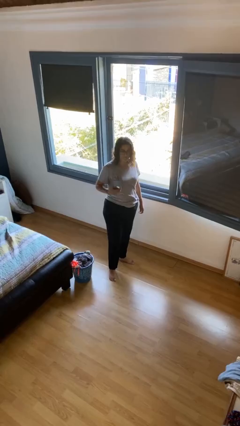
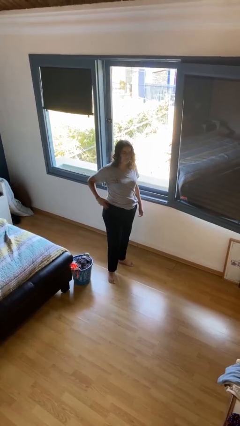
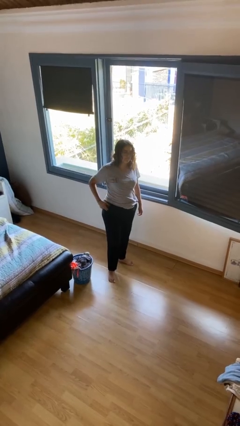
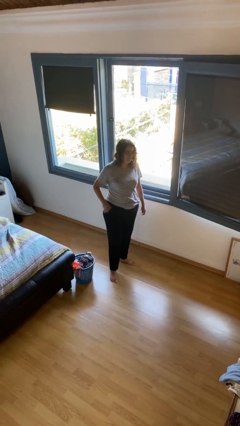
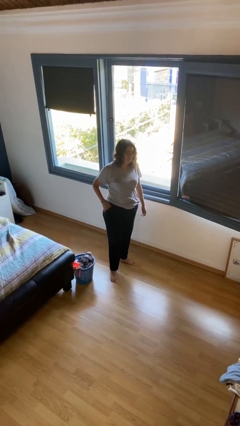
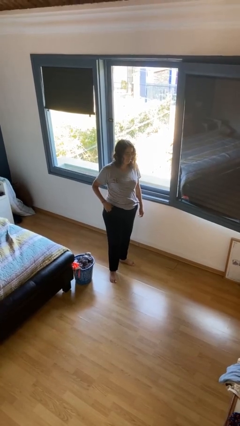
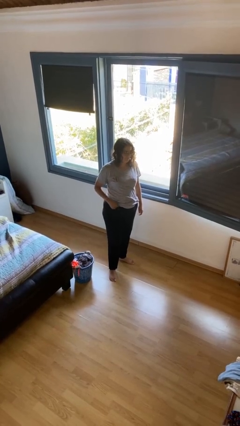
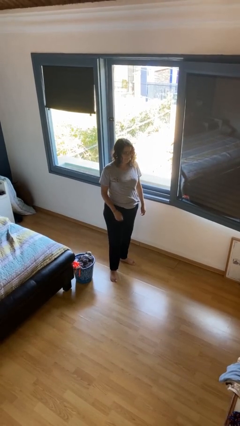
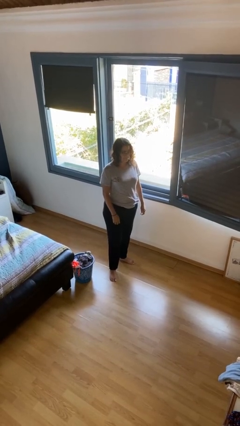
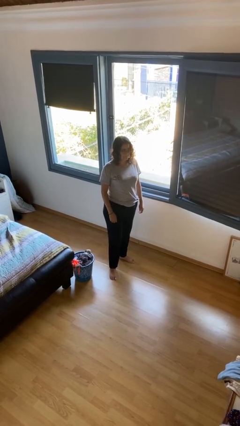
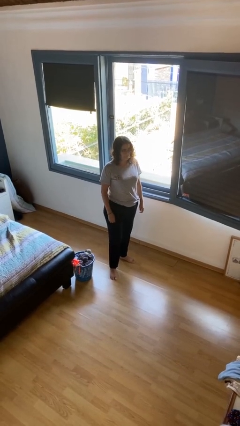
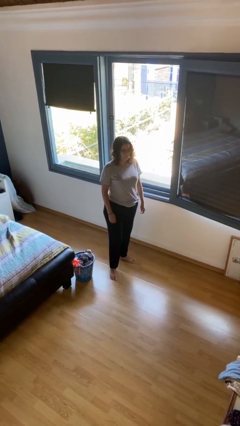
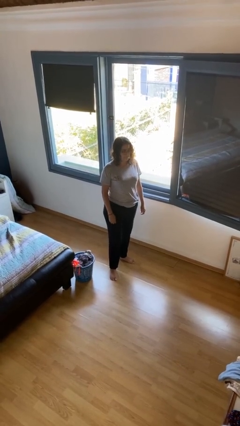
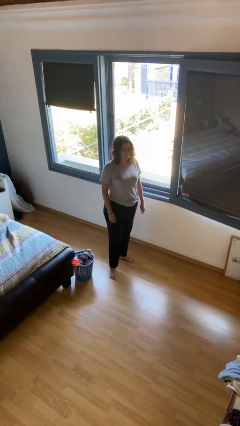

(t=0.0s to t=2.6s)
person puts phone into pocket

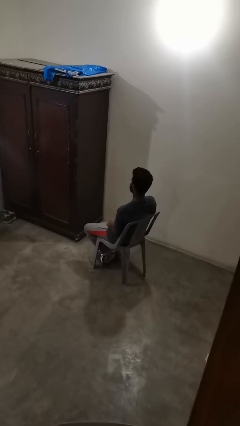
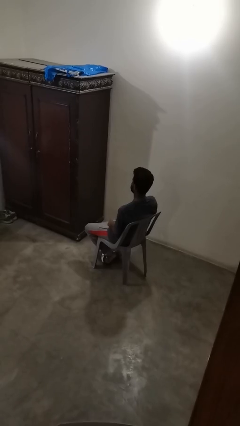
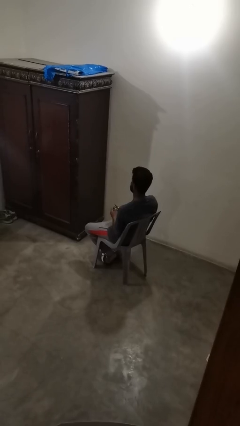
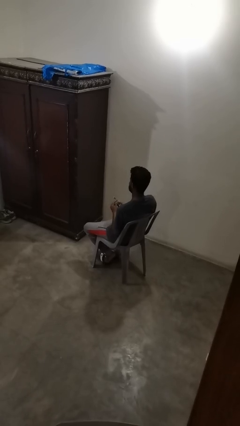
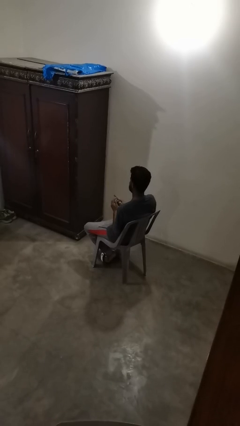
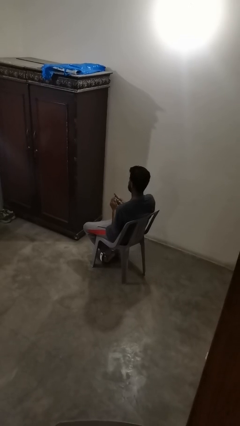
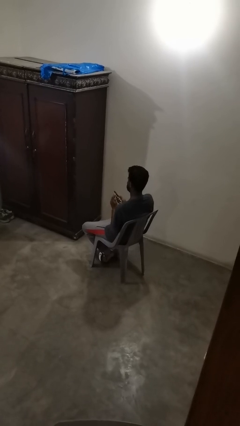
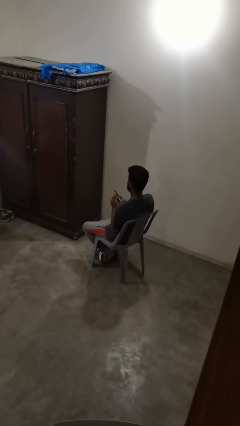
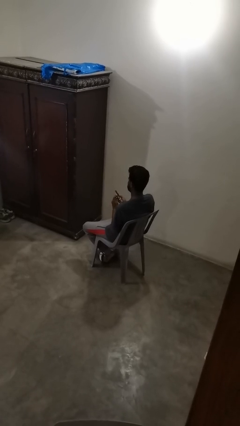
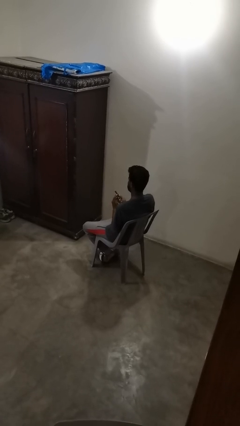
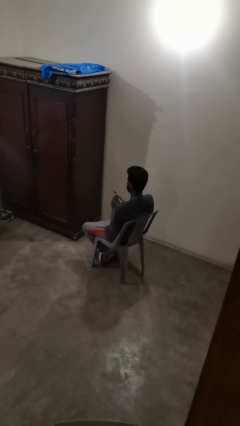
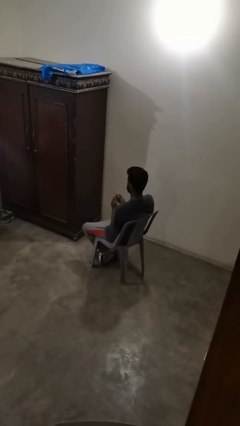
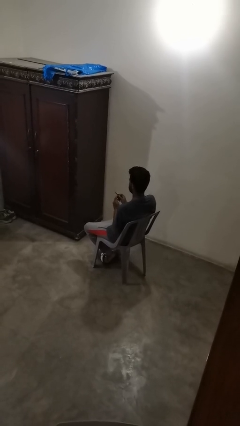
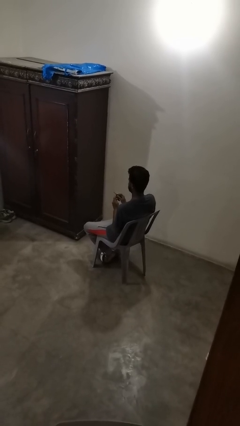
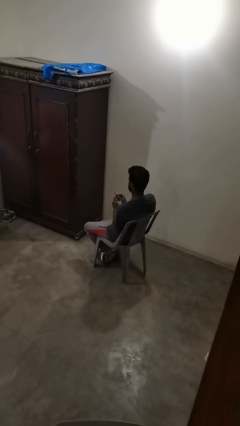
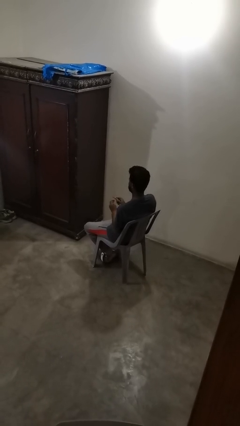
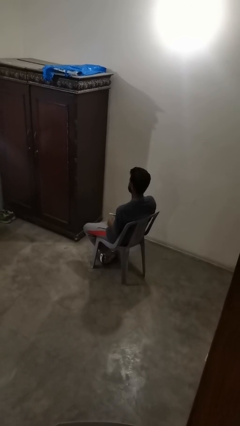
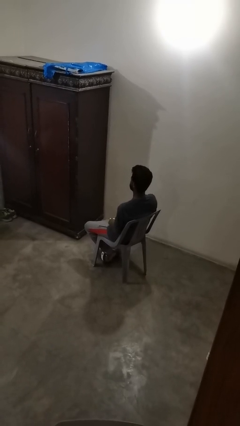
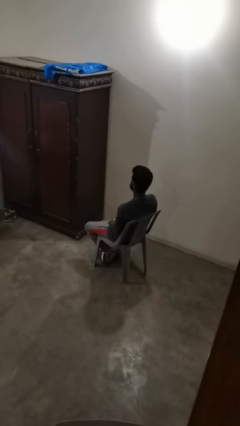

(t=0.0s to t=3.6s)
person files fingernails

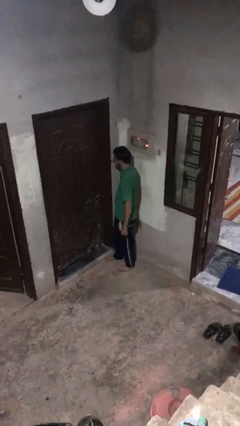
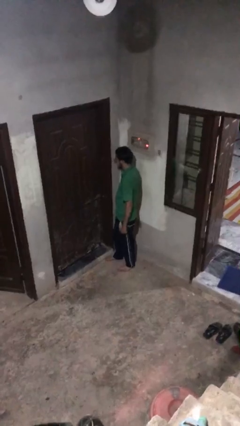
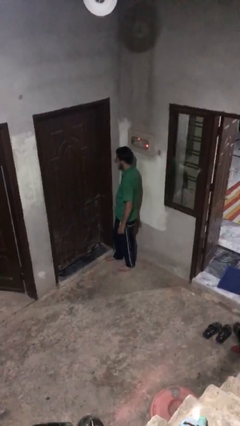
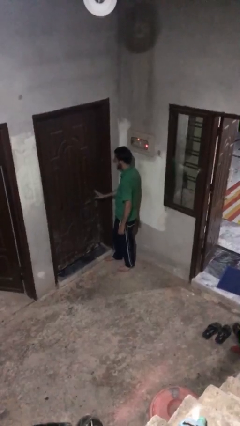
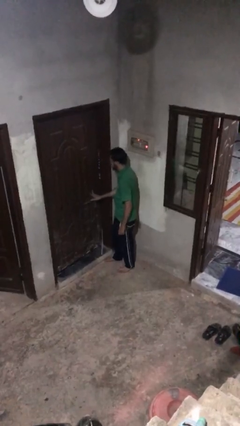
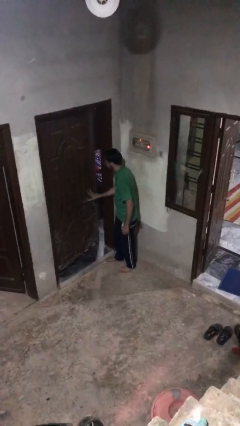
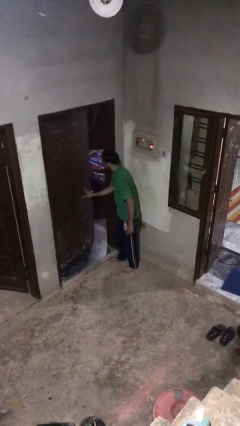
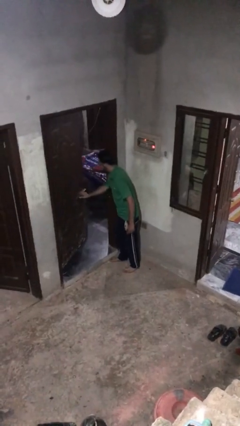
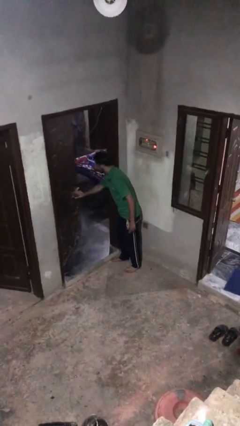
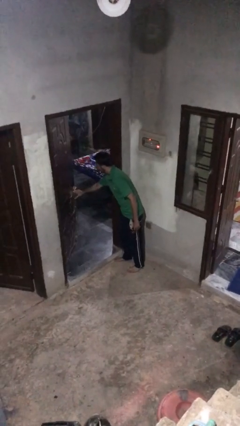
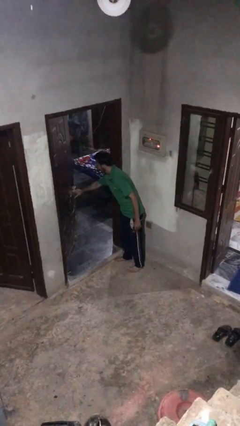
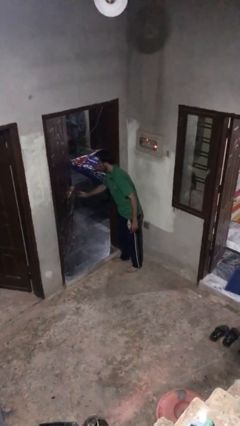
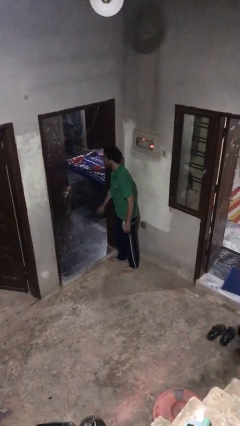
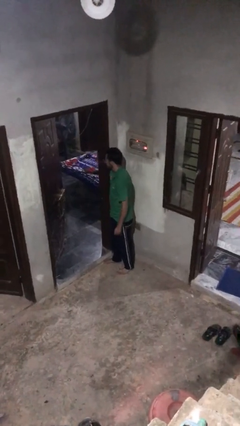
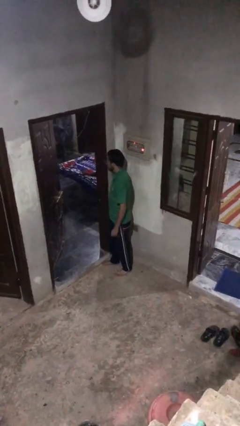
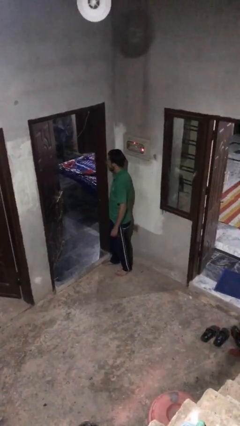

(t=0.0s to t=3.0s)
person opens facility door

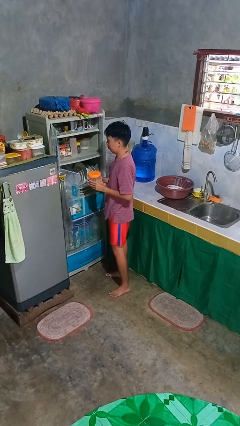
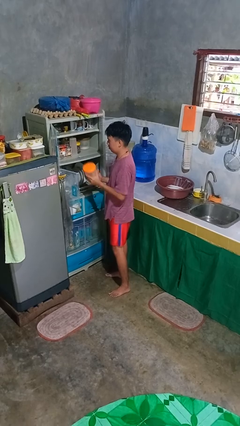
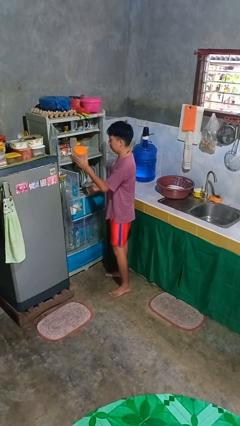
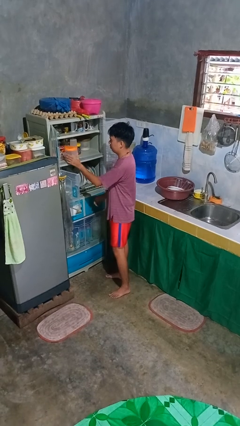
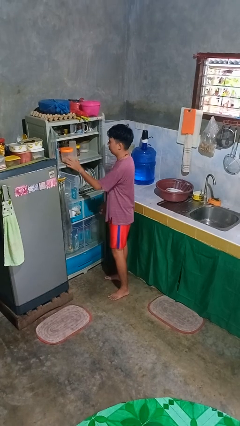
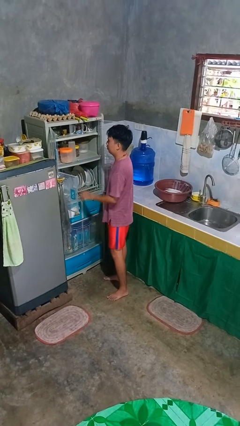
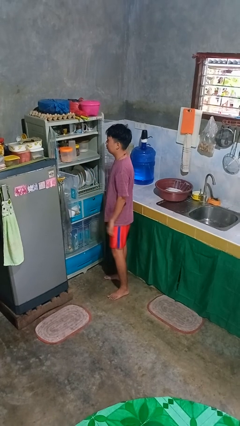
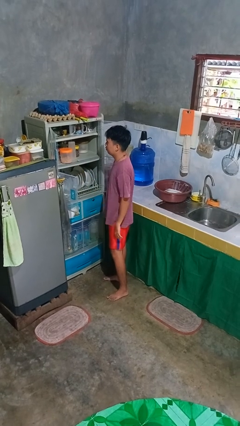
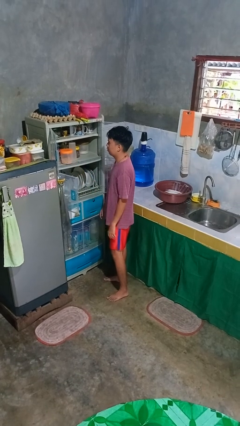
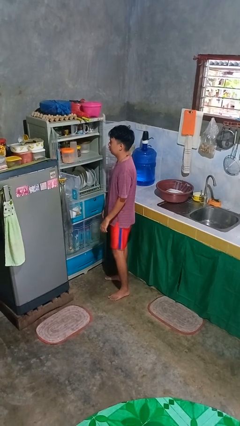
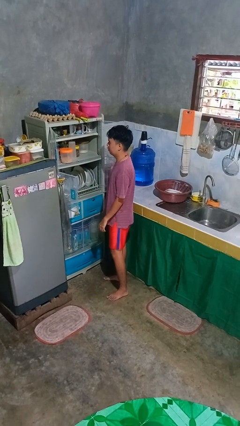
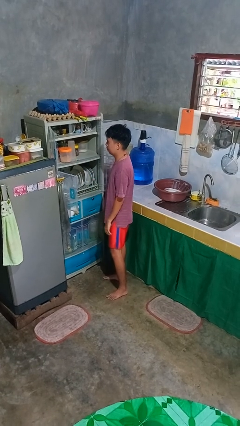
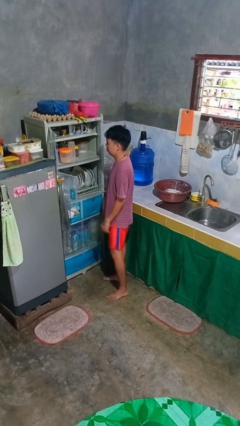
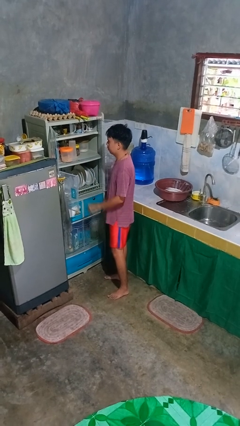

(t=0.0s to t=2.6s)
person puts object in cabinet

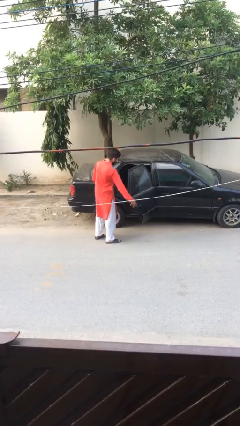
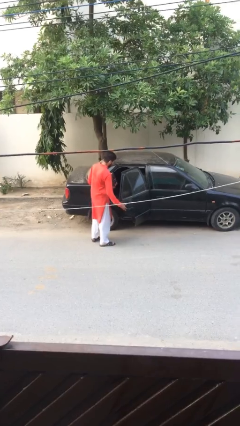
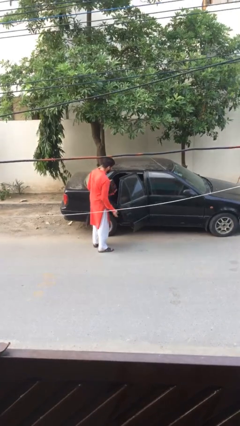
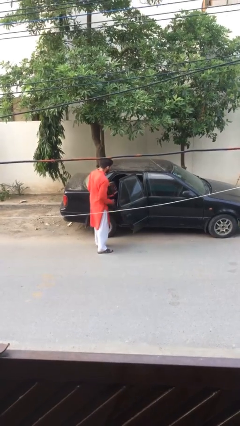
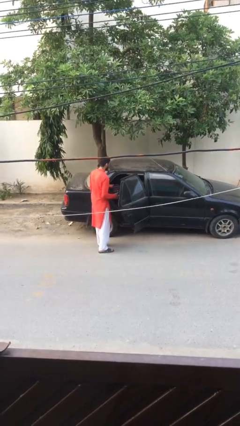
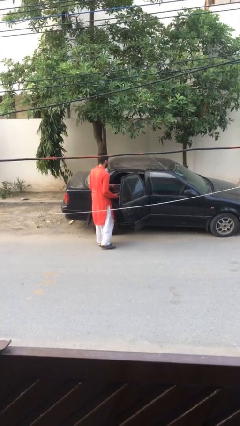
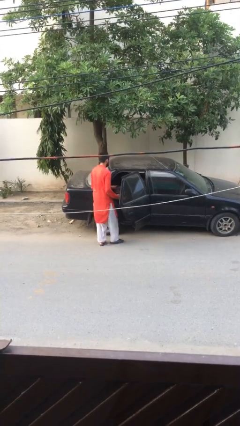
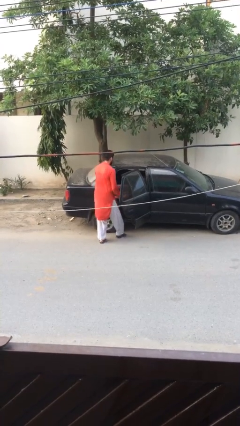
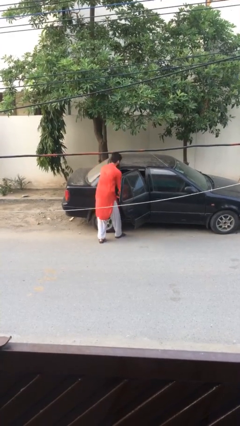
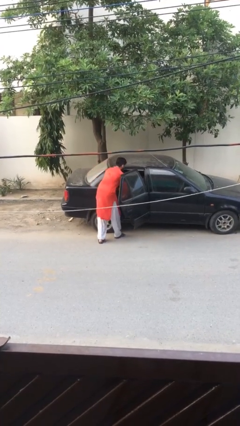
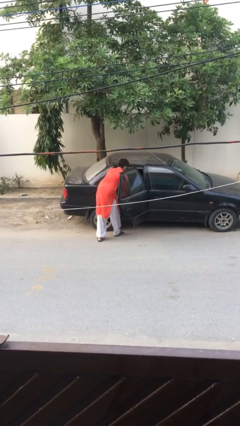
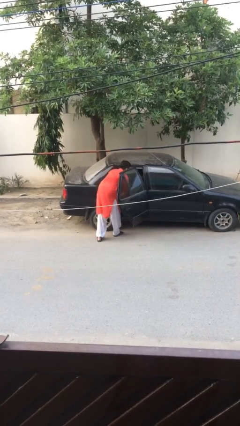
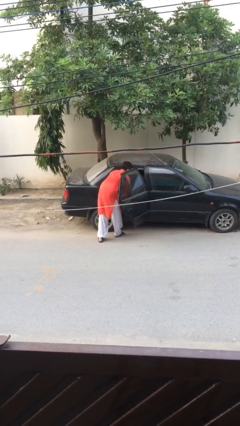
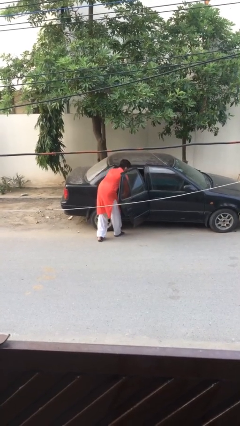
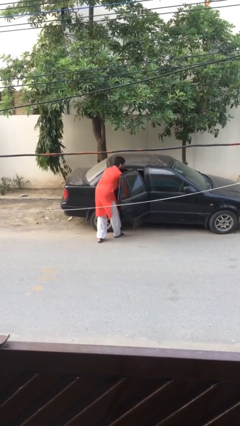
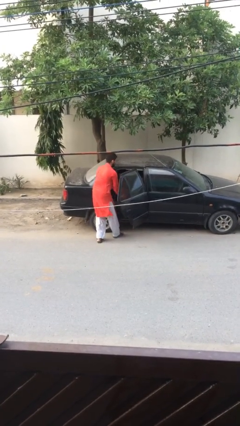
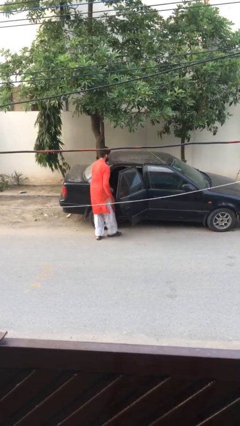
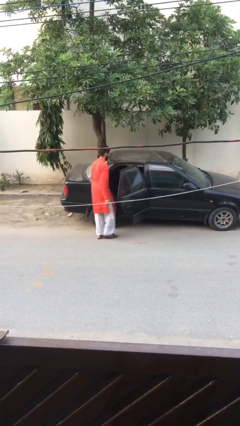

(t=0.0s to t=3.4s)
person loads car

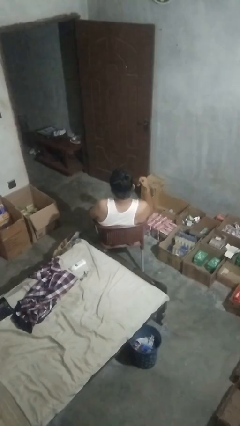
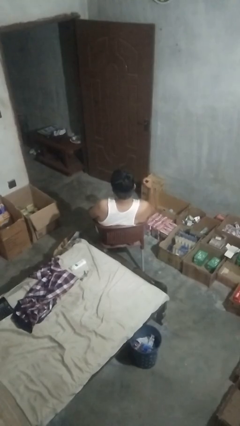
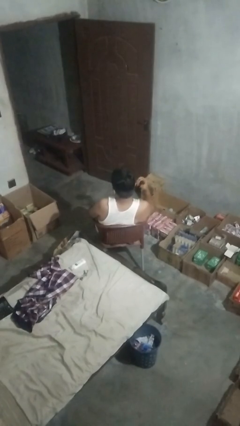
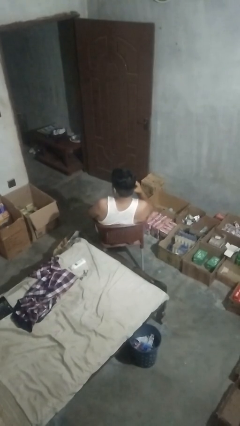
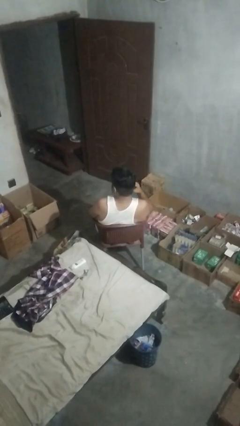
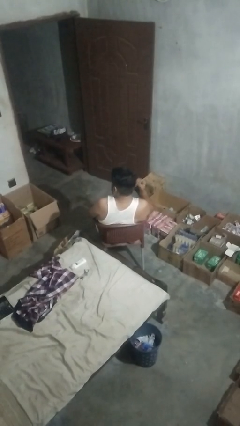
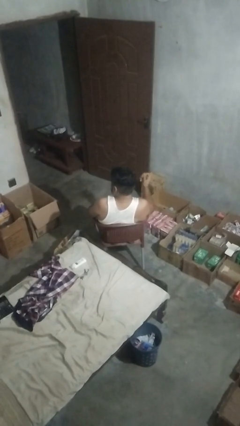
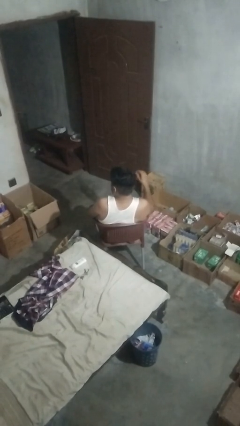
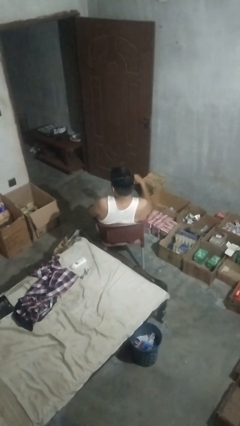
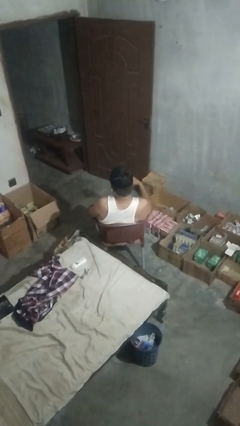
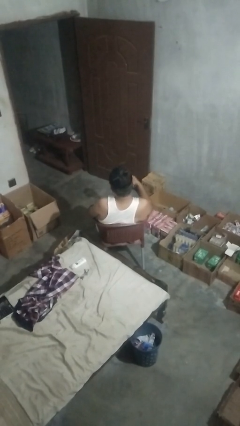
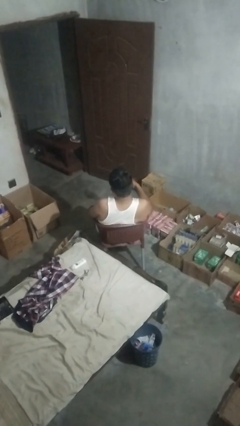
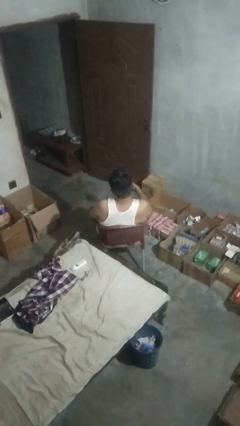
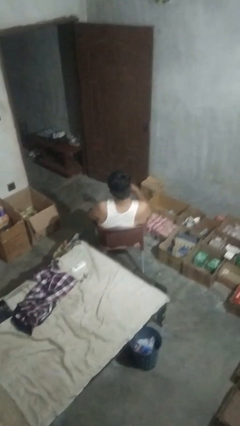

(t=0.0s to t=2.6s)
person takes off earrings
